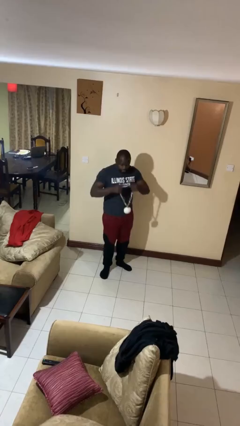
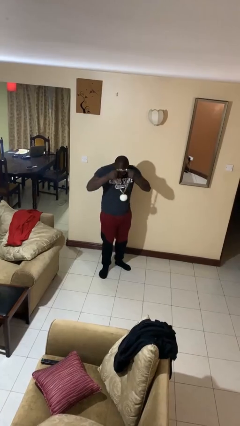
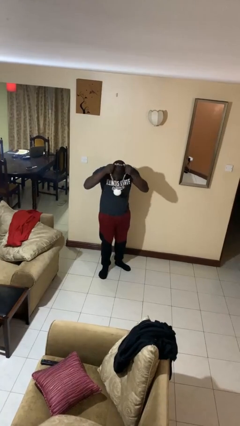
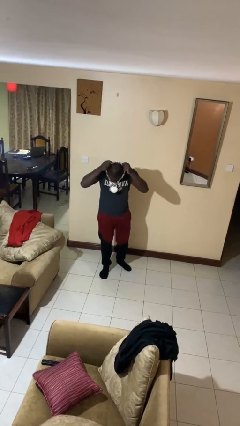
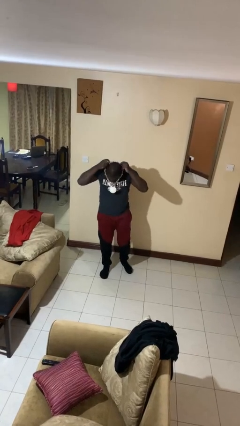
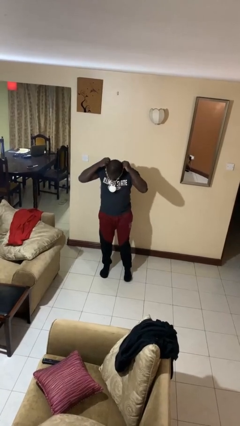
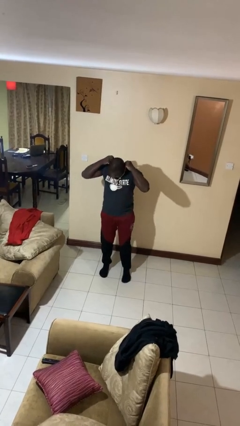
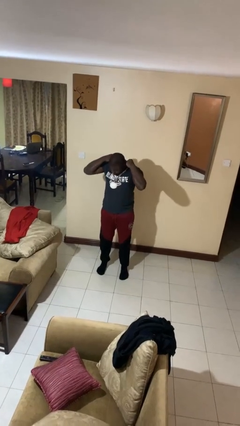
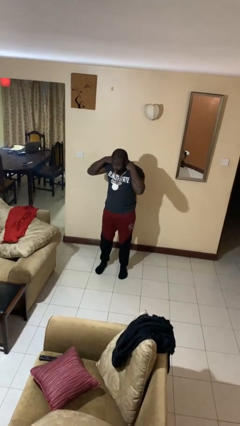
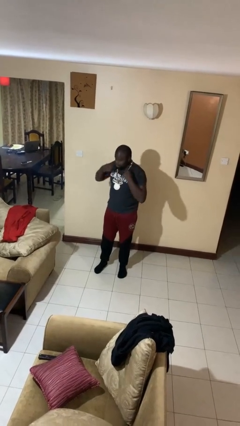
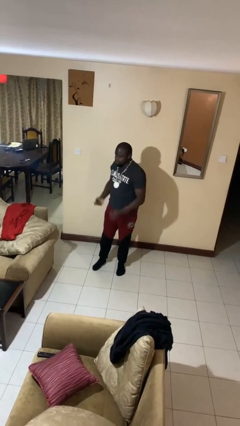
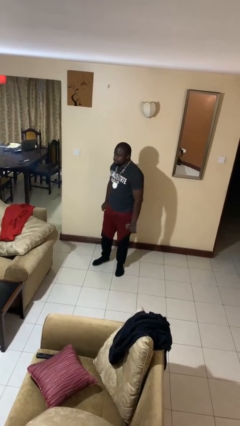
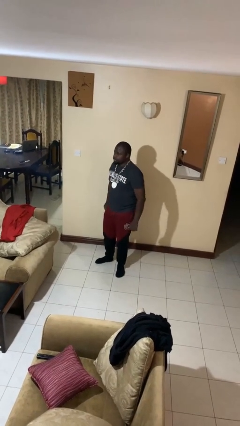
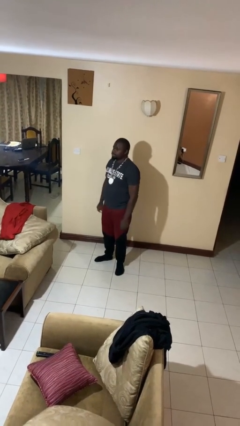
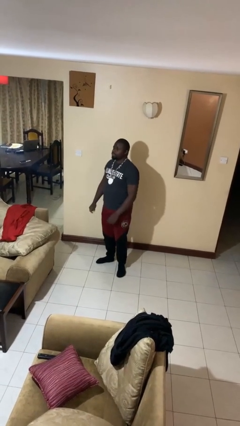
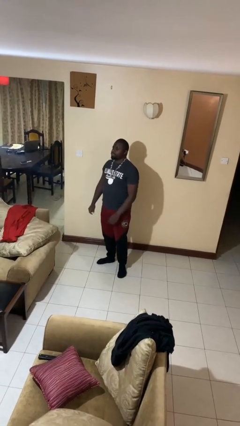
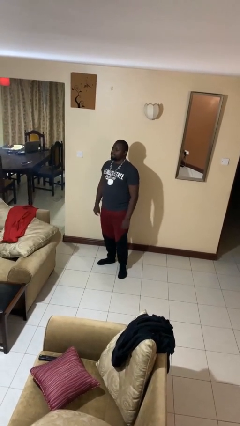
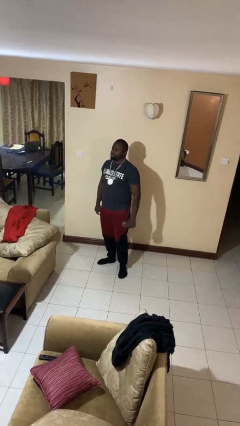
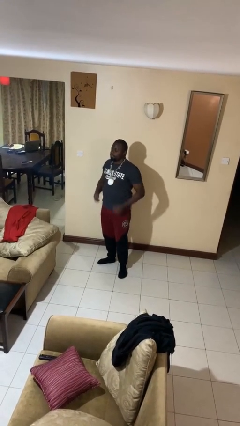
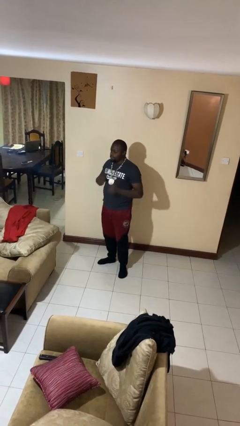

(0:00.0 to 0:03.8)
person puts on necklace

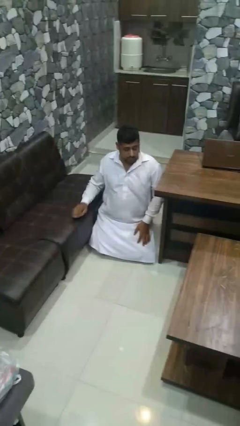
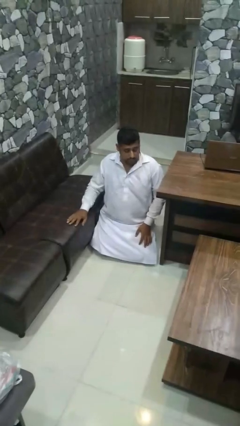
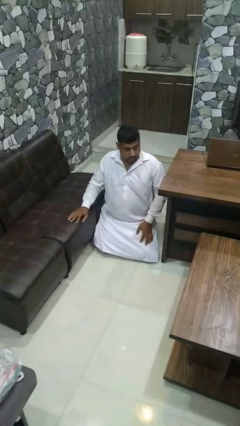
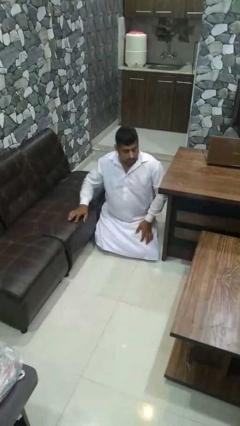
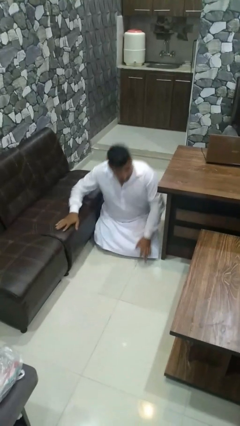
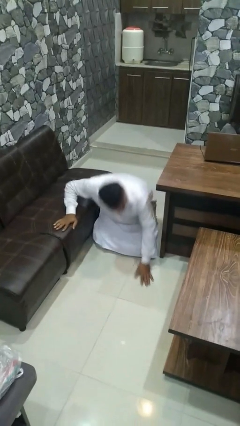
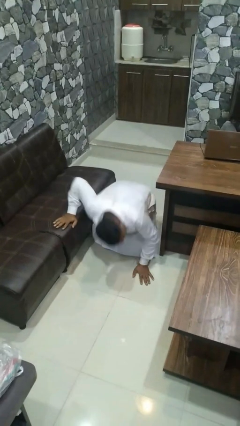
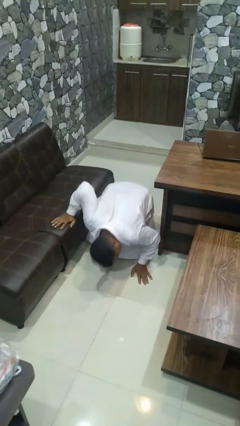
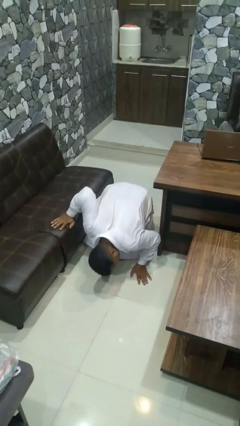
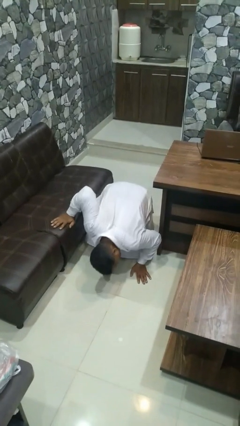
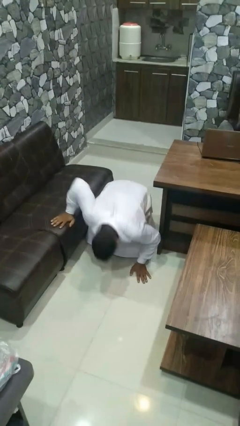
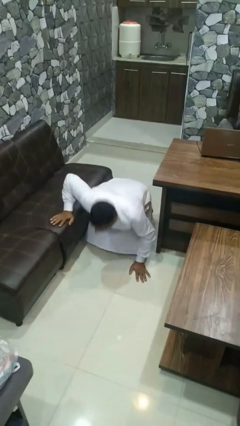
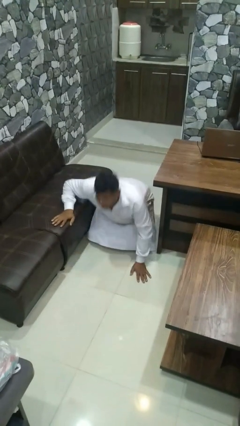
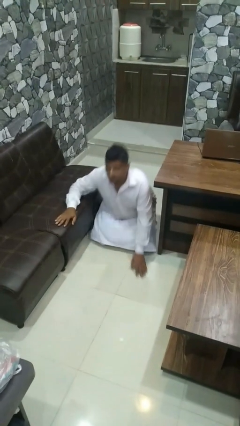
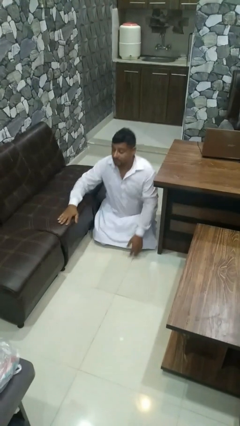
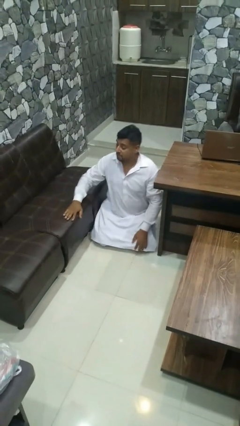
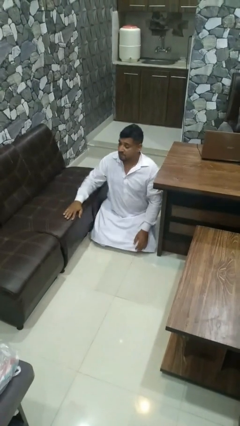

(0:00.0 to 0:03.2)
person searches under couch

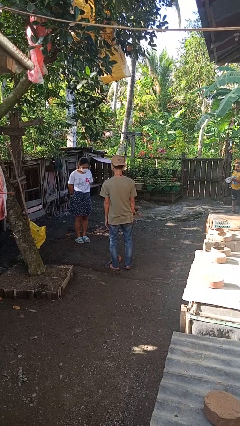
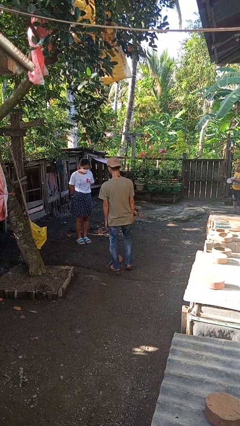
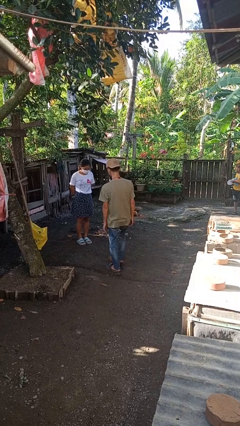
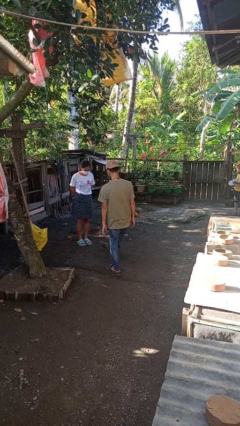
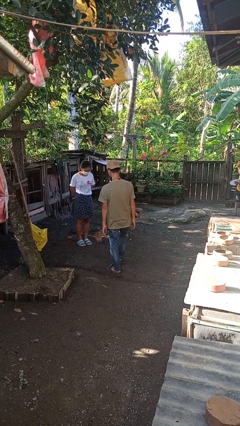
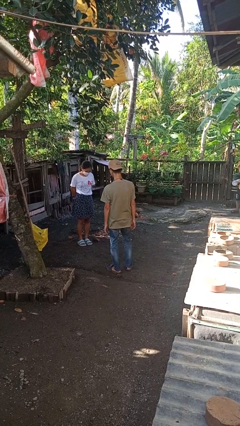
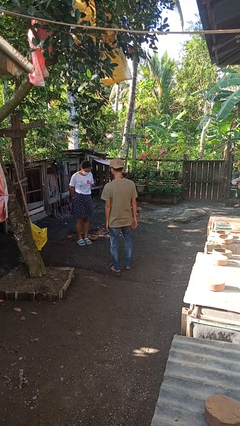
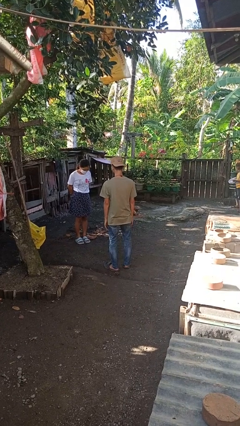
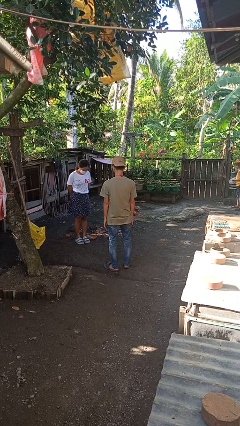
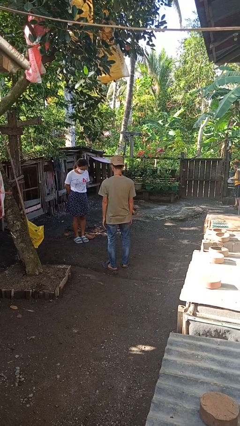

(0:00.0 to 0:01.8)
person kicks object to person

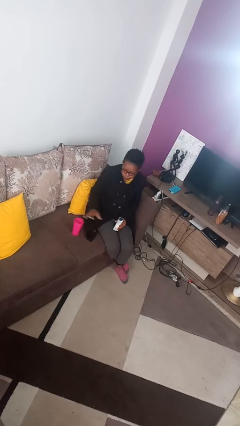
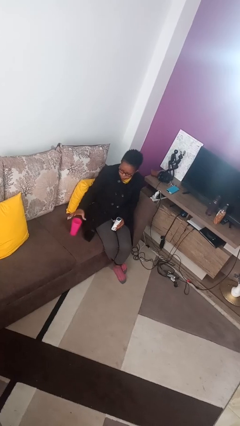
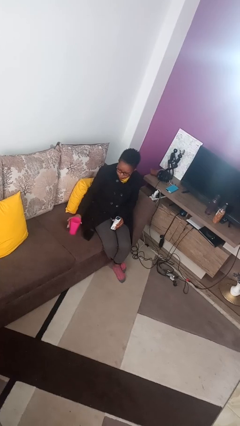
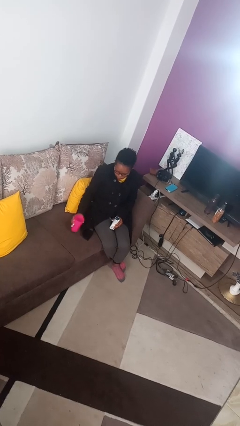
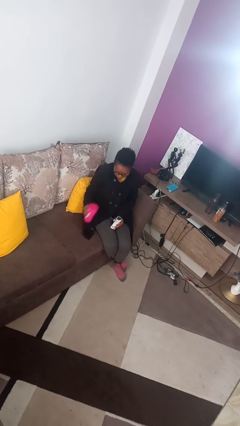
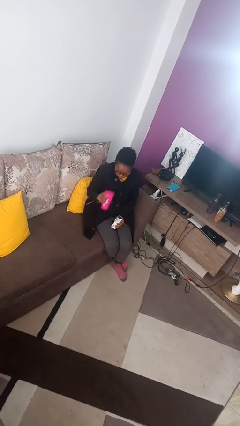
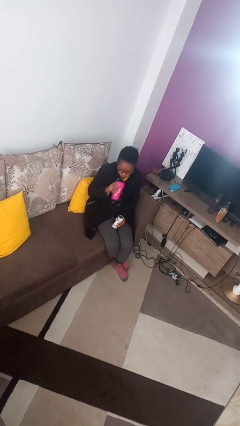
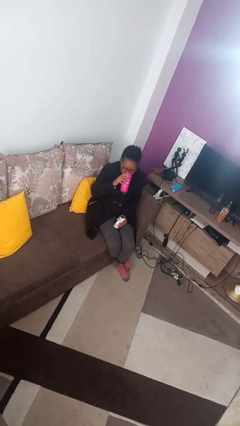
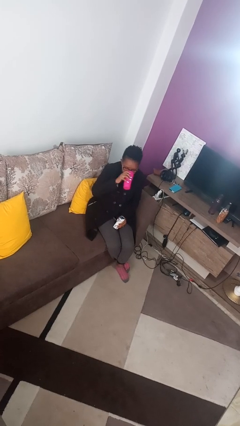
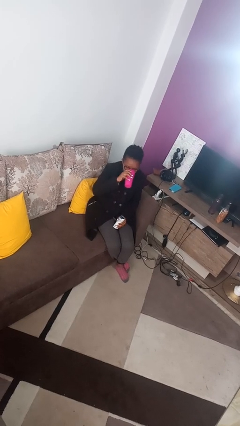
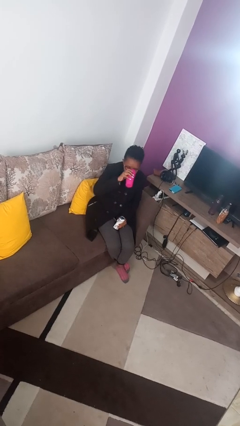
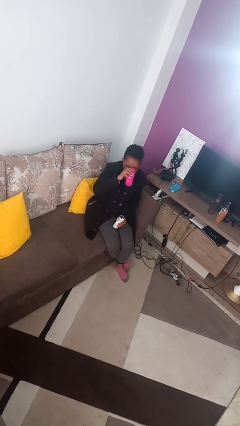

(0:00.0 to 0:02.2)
person drinks from cup

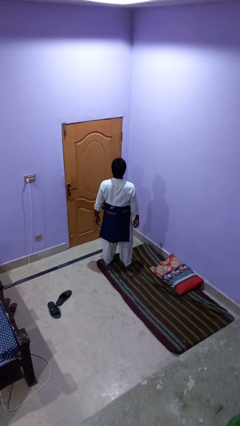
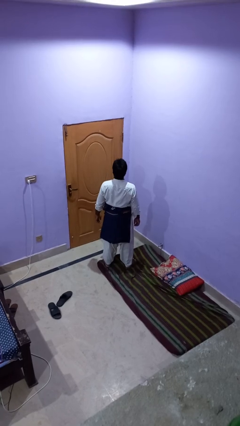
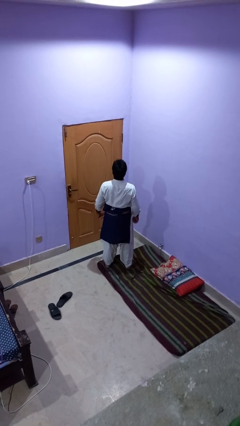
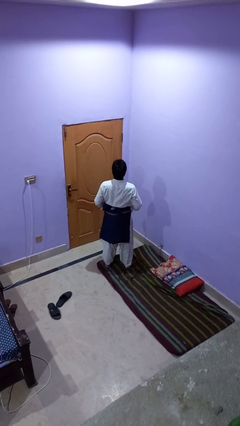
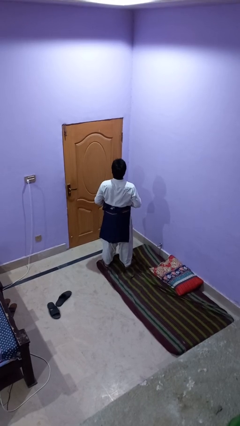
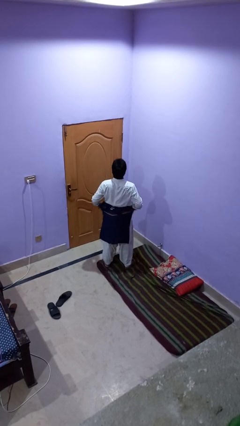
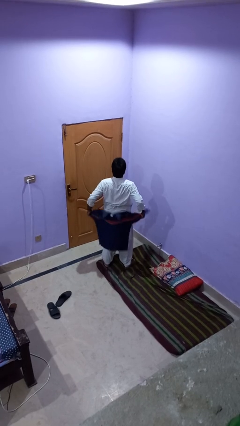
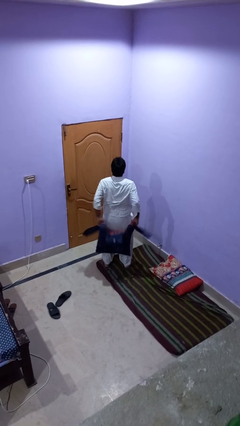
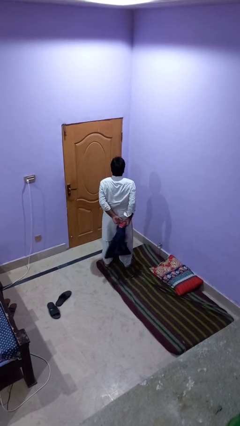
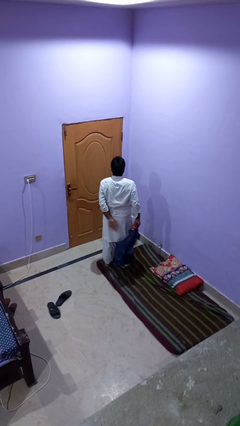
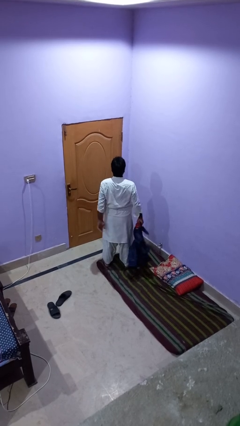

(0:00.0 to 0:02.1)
person unties jacket around waist

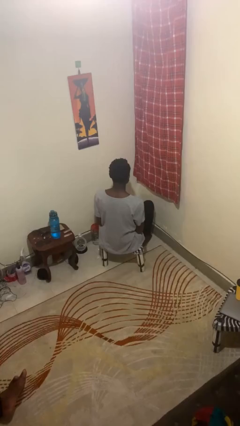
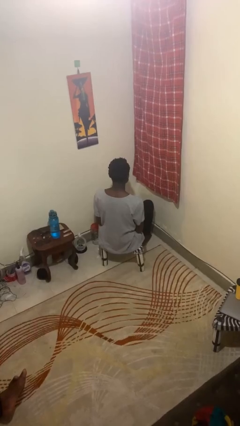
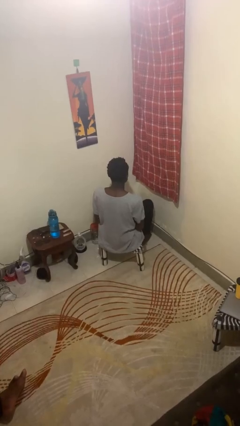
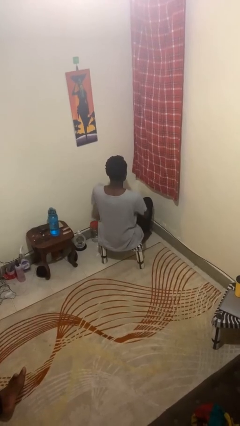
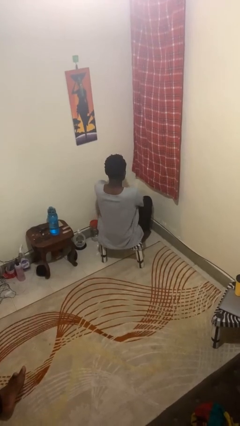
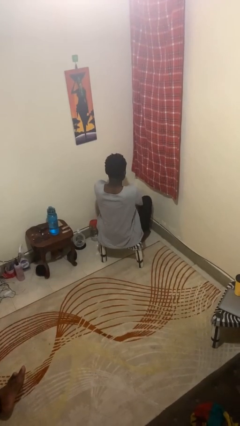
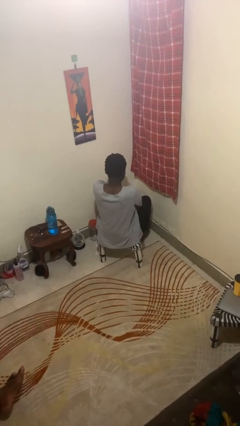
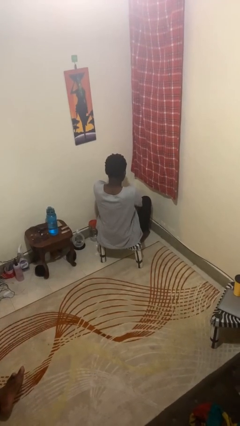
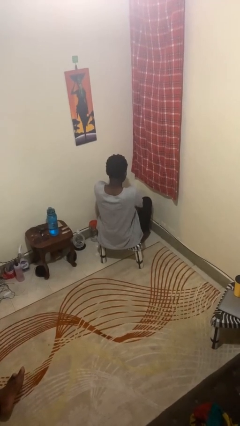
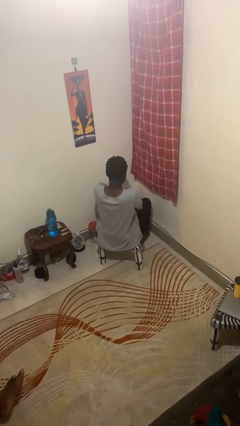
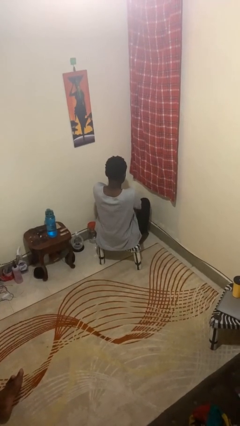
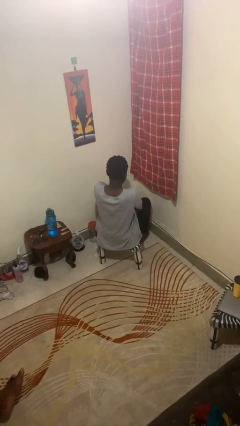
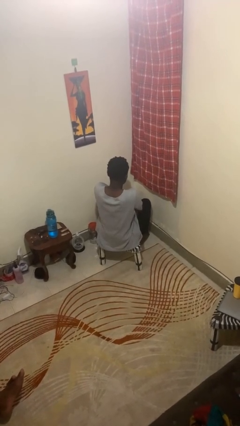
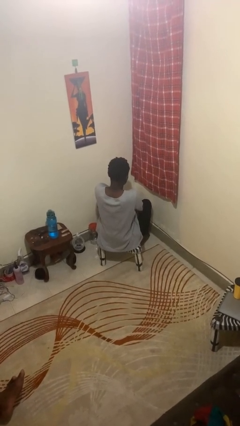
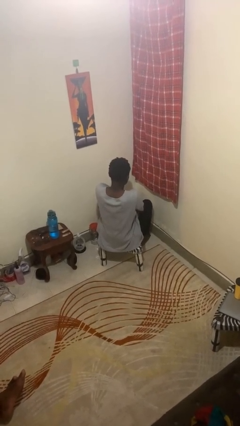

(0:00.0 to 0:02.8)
person crosses arms

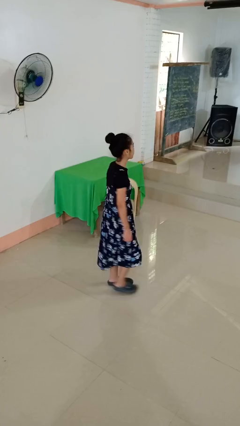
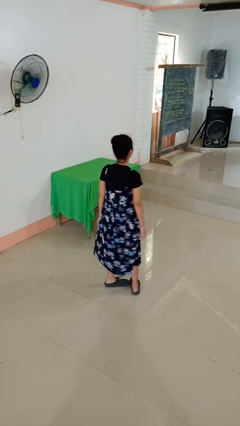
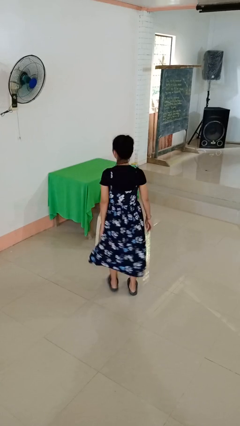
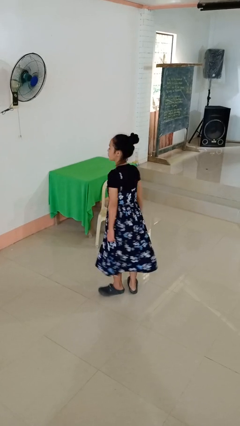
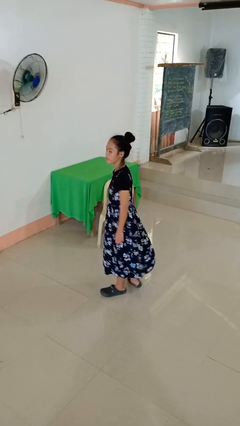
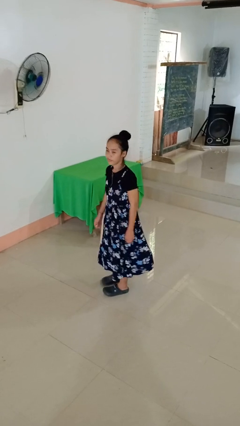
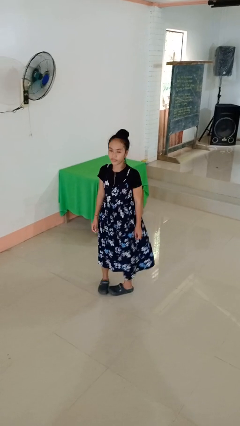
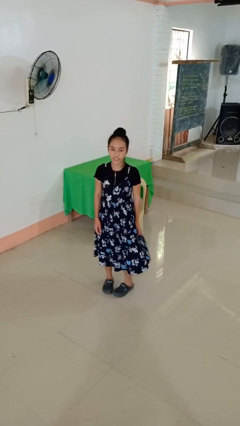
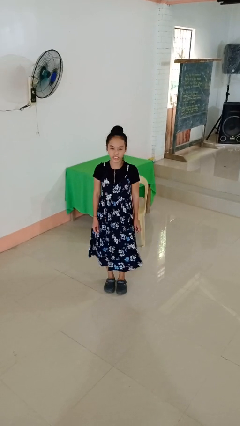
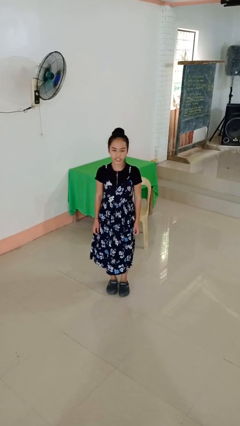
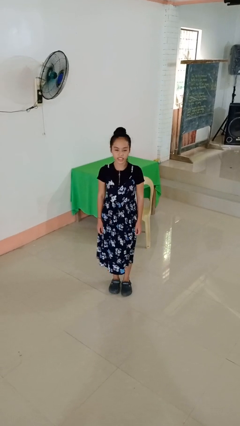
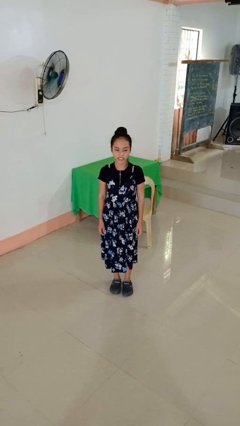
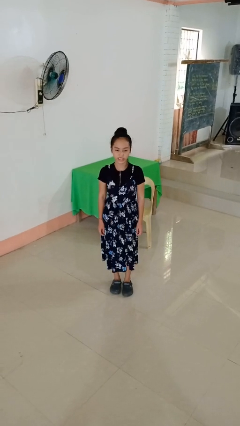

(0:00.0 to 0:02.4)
person twirls
